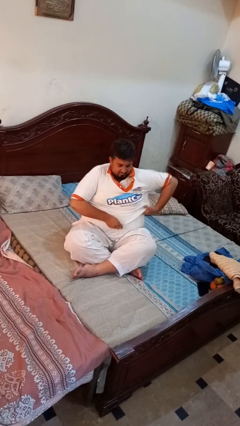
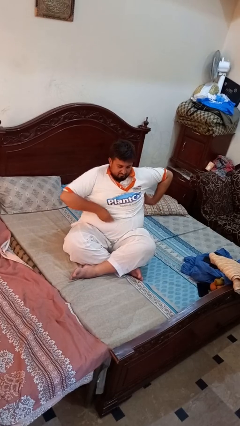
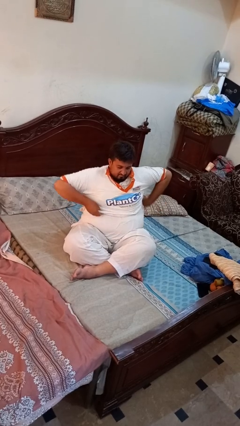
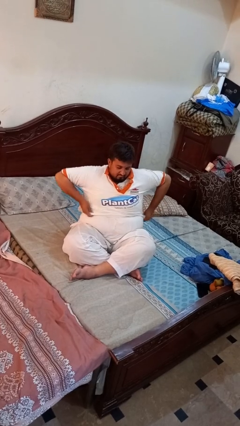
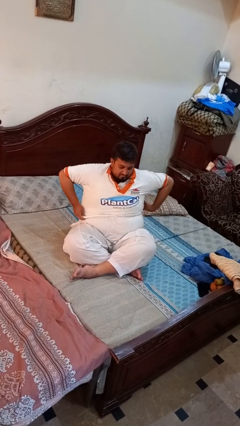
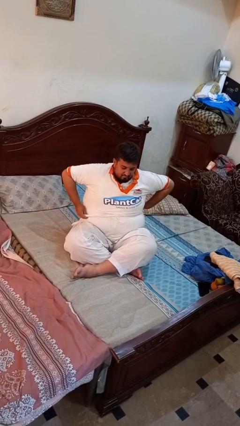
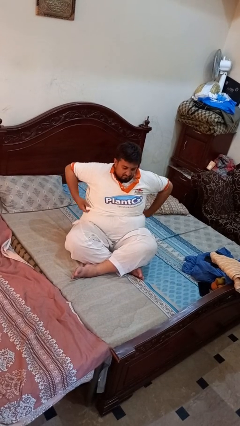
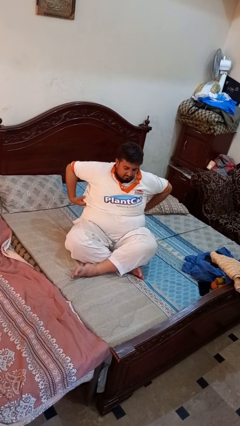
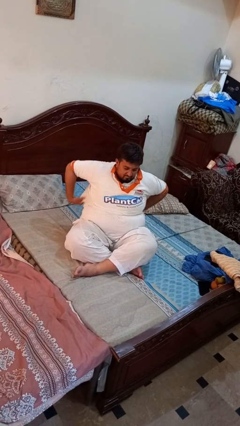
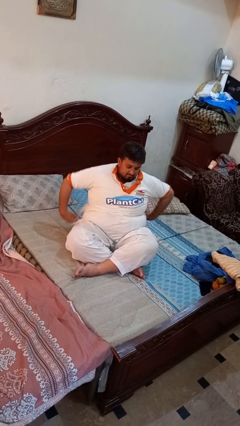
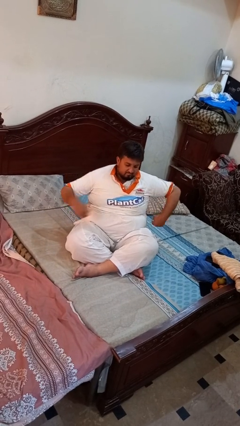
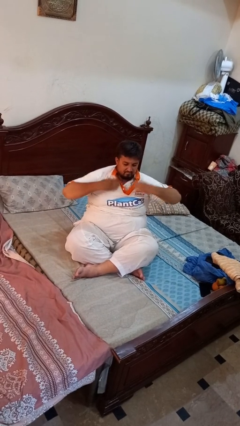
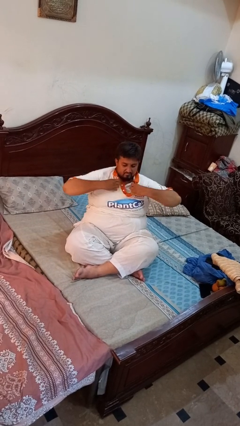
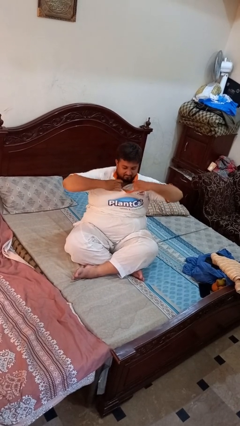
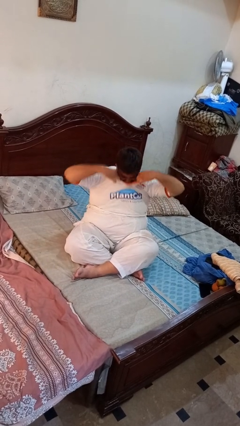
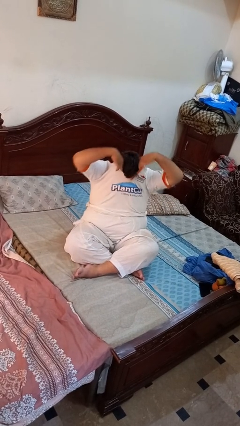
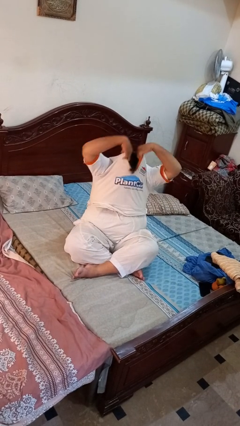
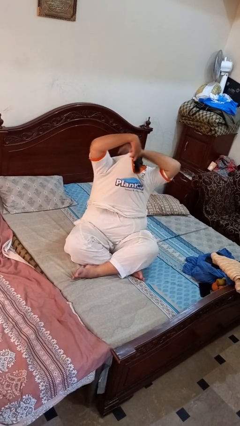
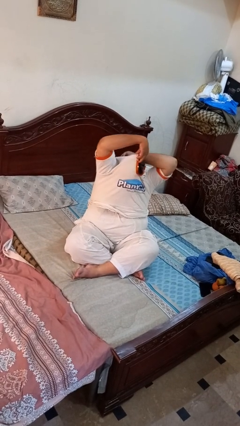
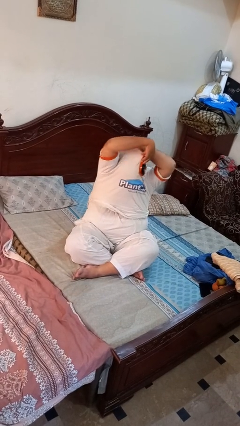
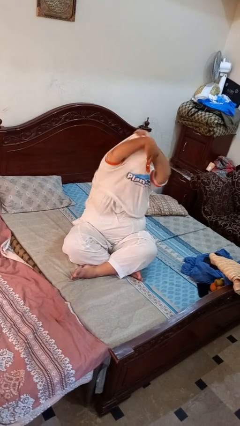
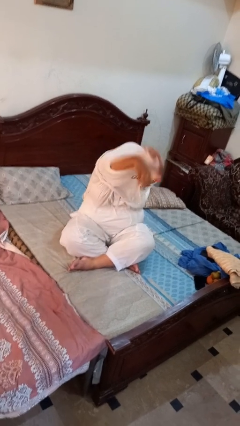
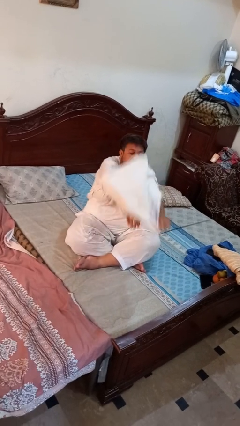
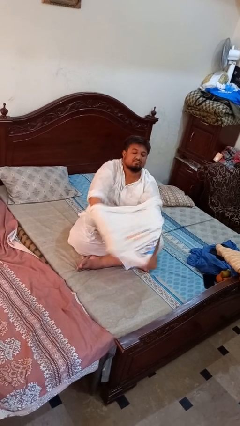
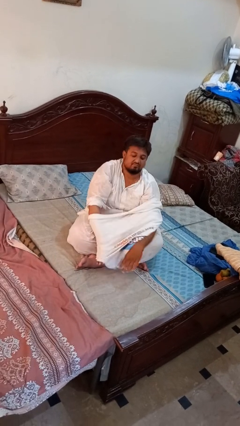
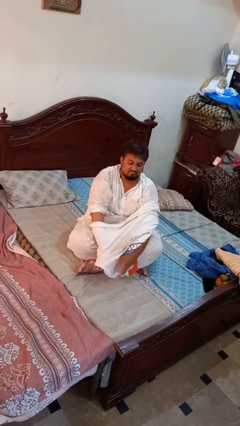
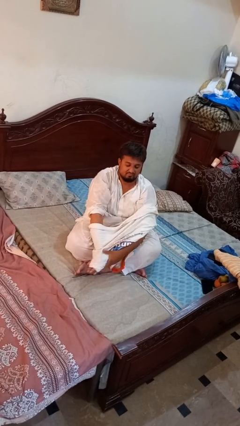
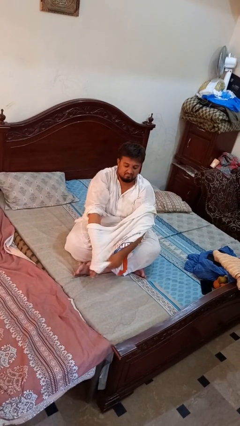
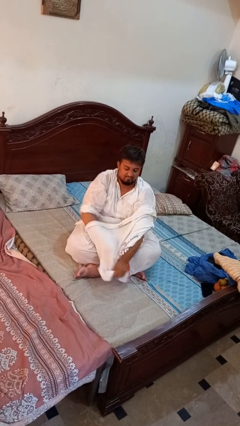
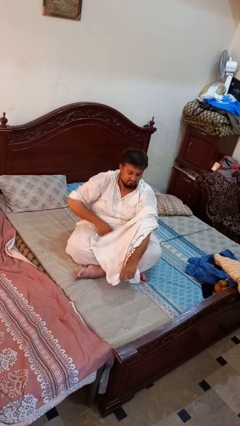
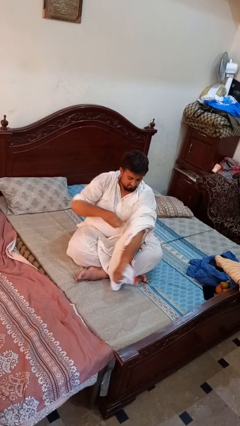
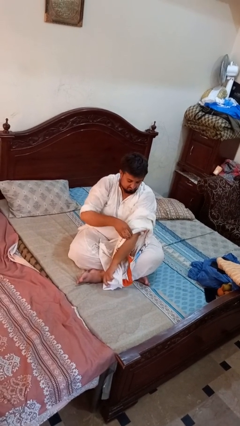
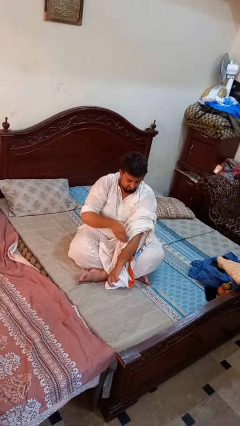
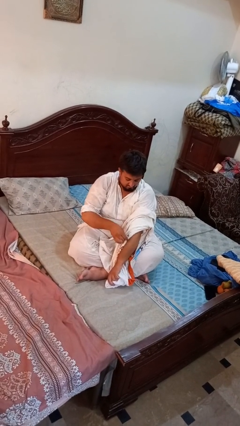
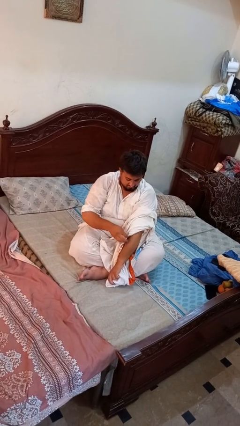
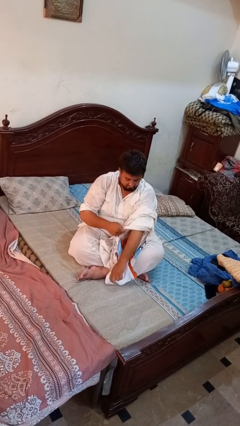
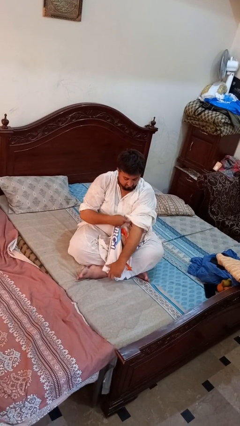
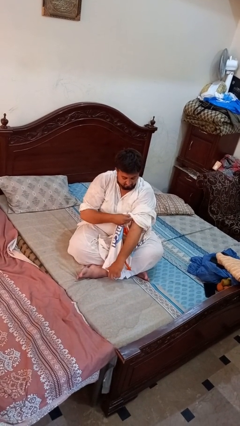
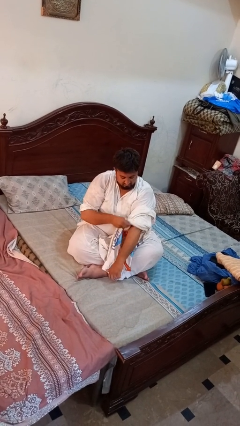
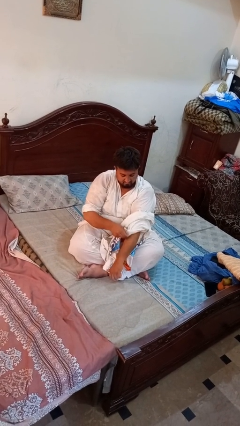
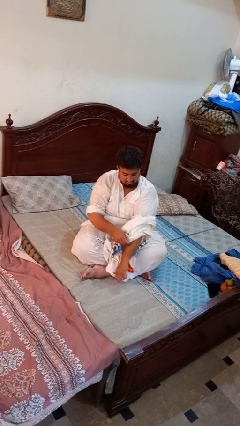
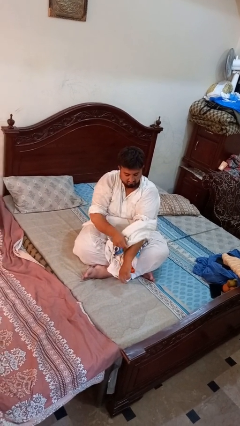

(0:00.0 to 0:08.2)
person takes off shirt

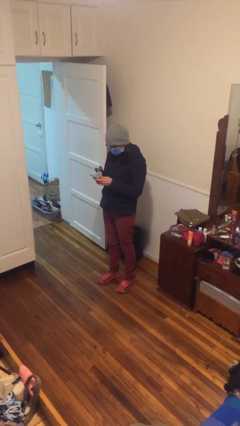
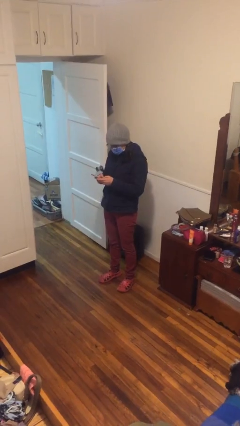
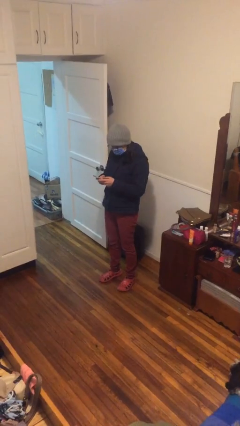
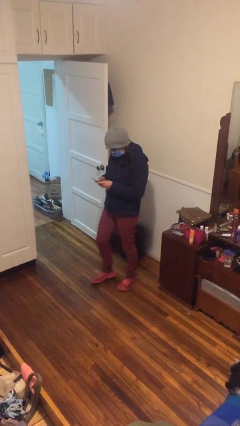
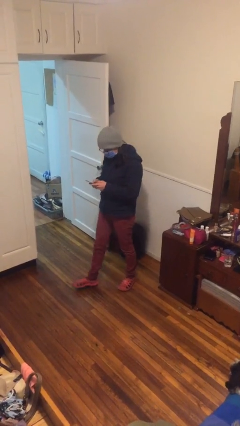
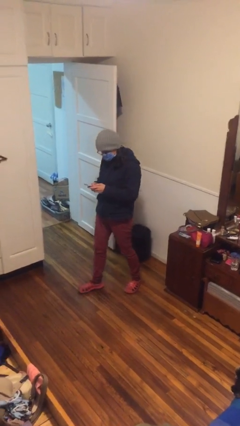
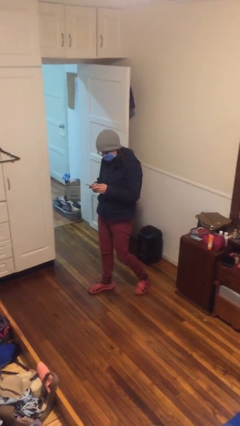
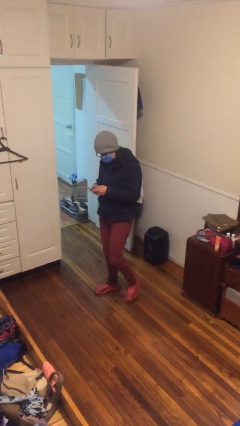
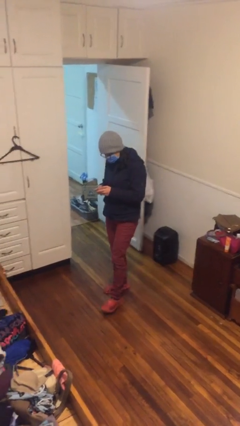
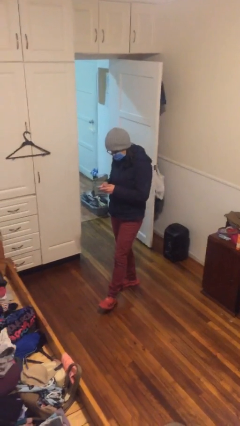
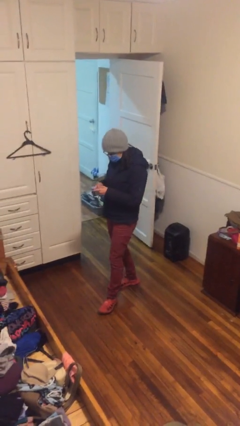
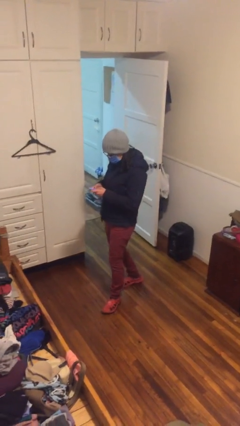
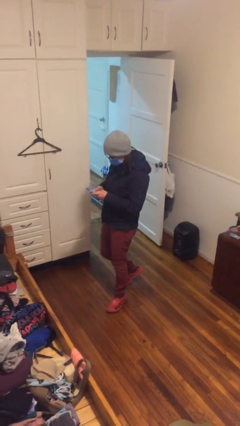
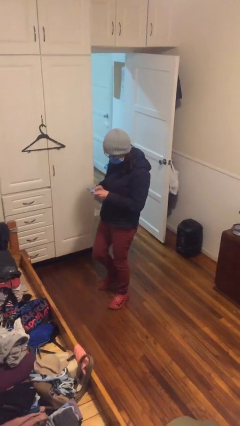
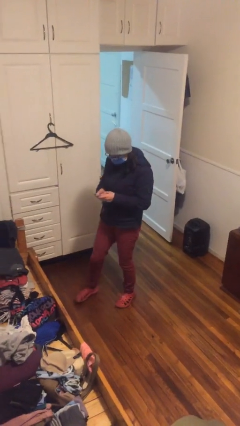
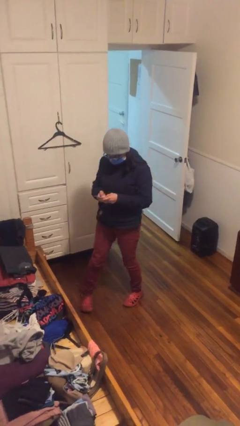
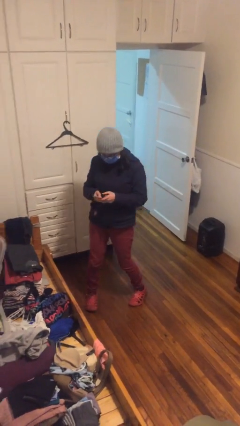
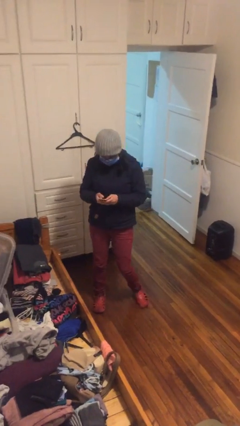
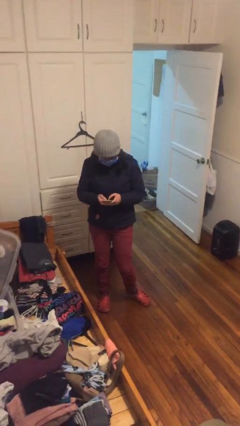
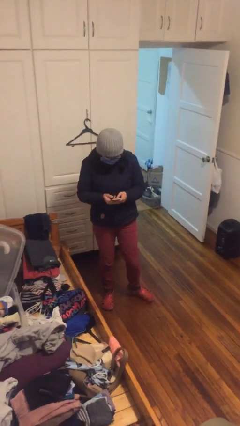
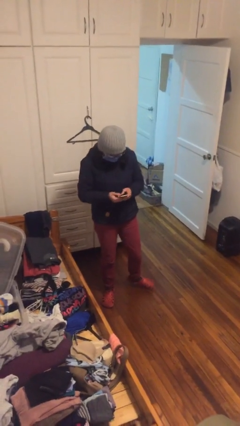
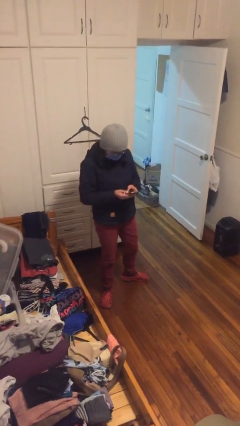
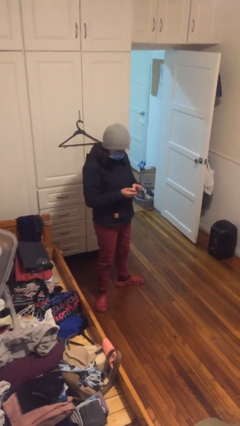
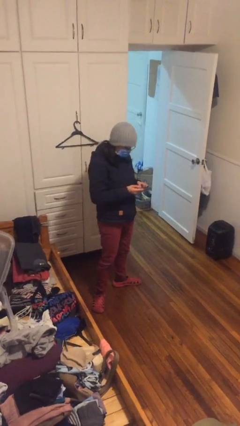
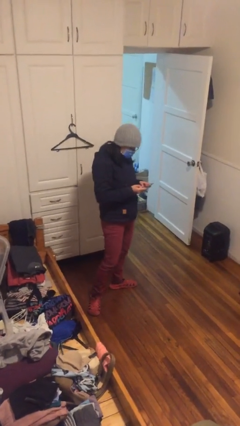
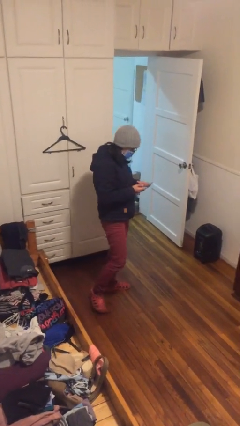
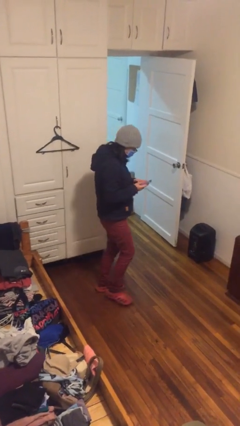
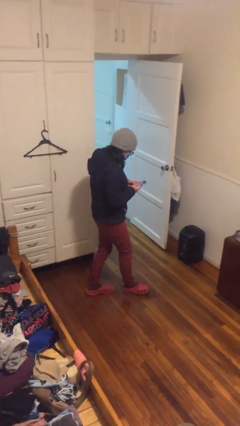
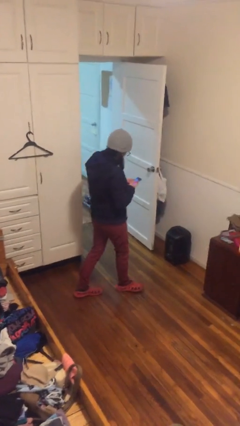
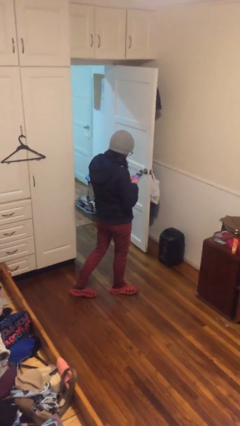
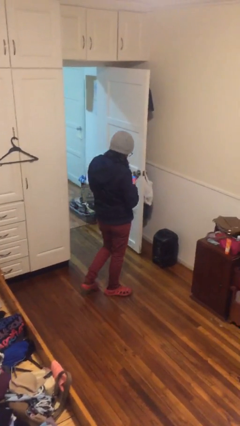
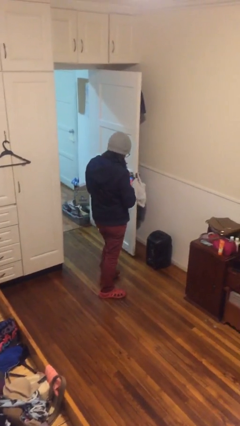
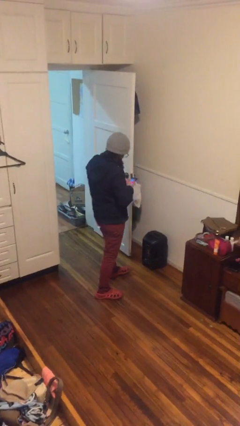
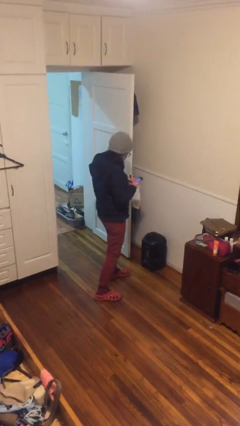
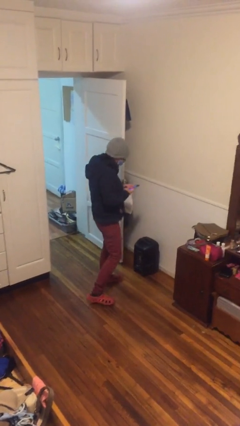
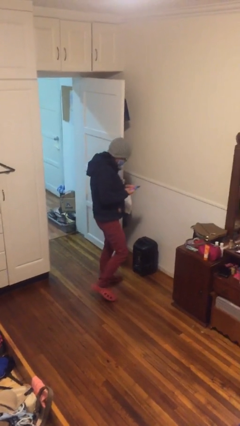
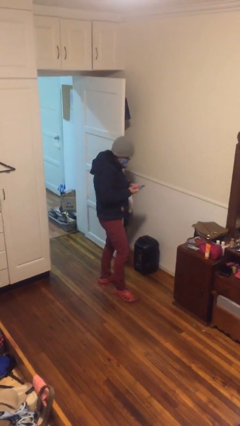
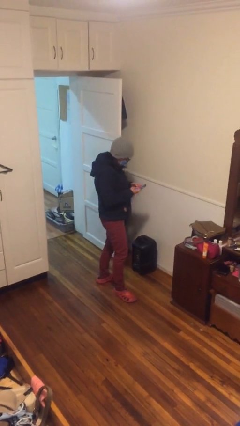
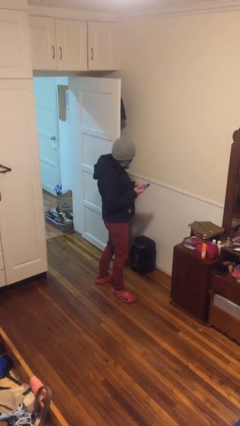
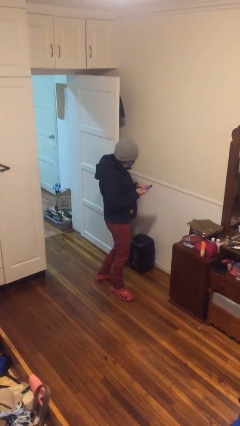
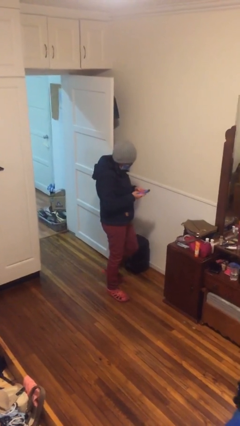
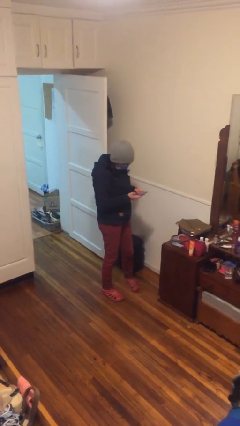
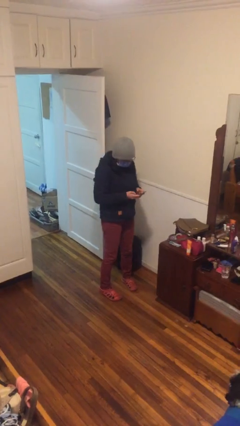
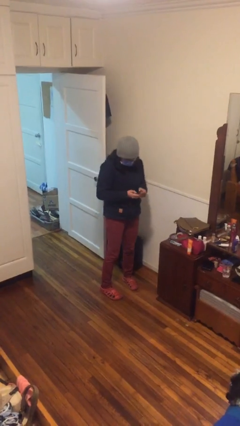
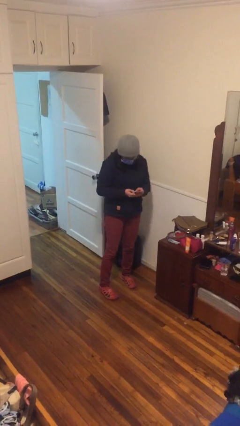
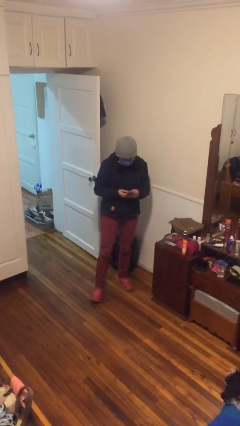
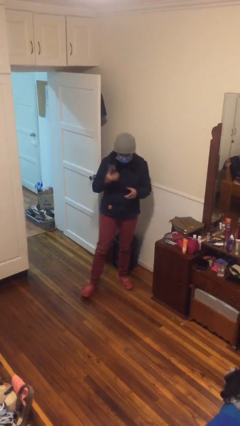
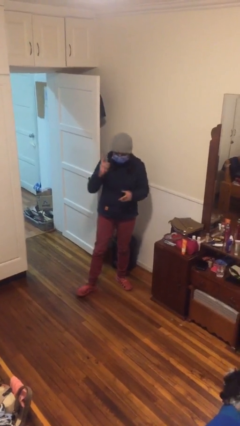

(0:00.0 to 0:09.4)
person texts on phone

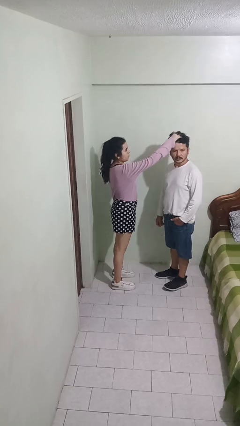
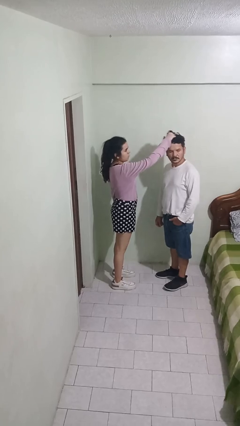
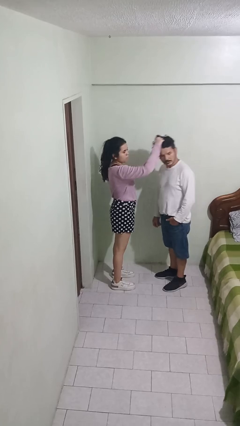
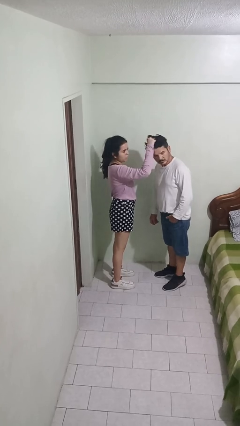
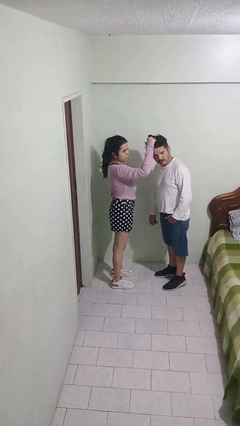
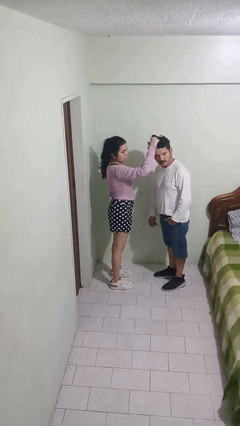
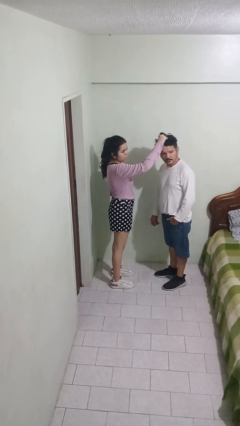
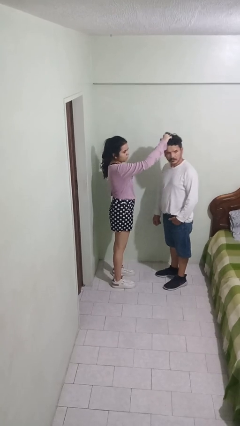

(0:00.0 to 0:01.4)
person grabs person by hair
